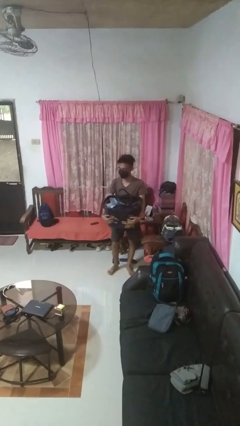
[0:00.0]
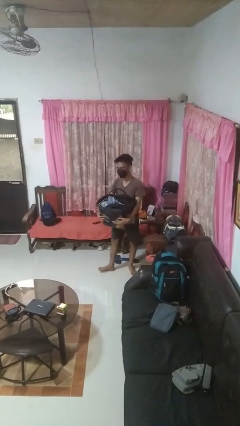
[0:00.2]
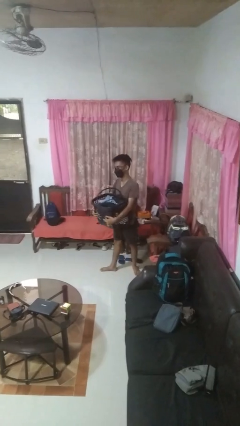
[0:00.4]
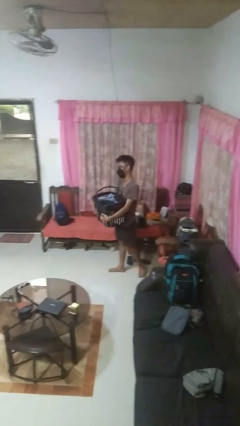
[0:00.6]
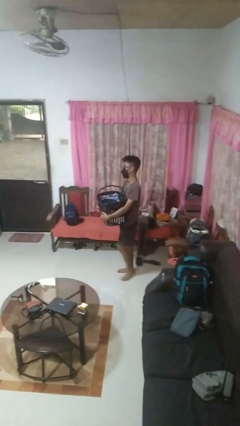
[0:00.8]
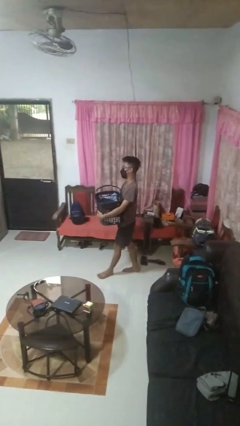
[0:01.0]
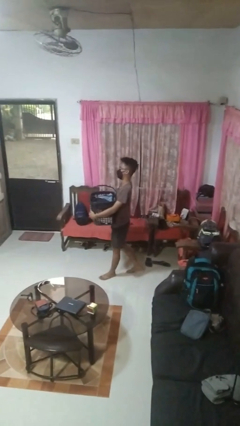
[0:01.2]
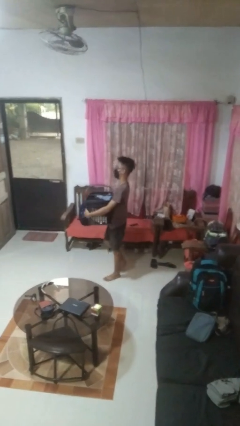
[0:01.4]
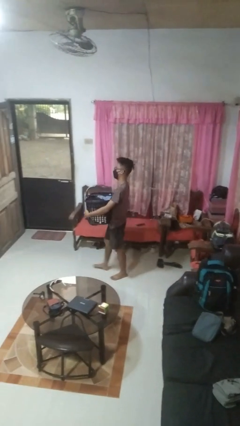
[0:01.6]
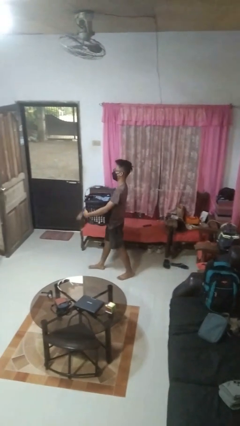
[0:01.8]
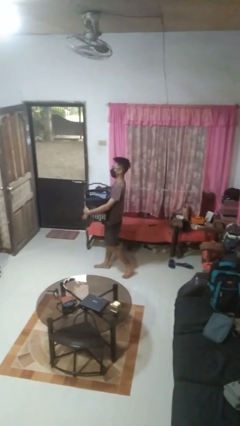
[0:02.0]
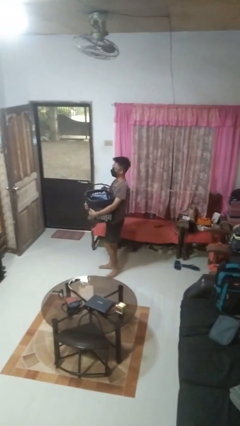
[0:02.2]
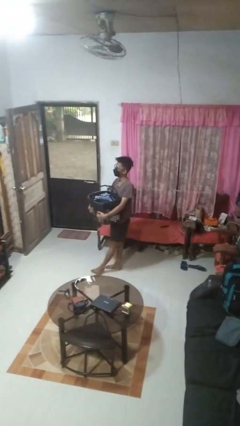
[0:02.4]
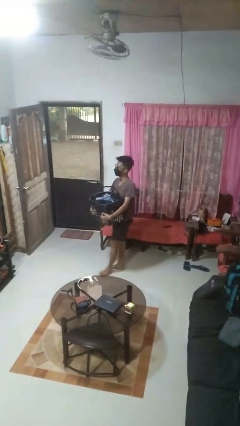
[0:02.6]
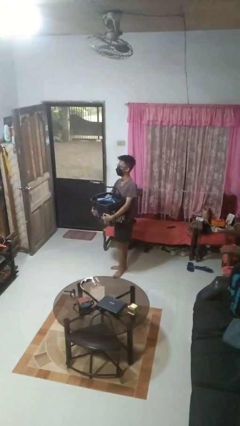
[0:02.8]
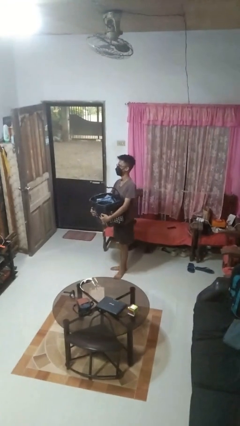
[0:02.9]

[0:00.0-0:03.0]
person carries laundry basket

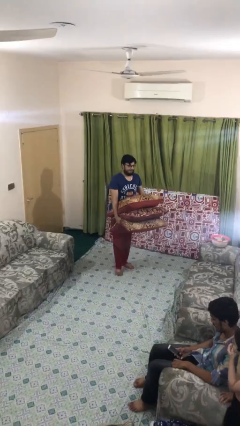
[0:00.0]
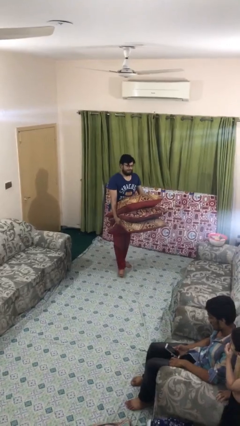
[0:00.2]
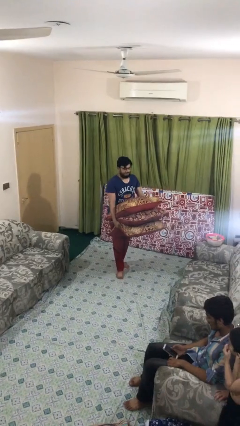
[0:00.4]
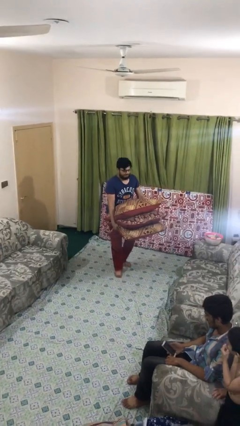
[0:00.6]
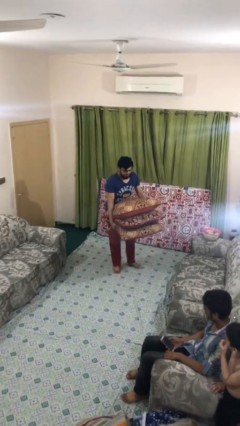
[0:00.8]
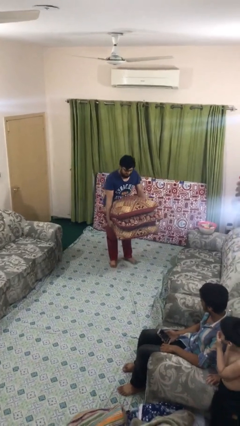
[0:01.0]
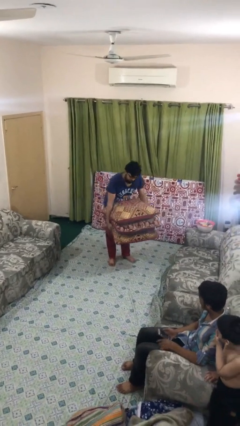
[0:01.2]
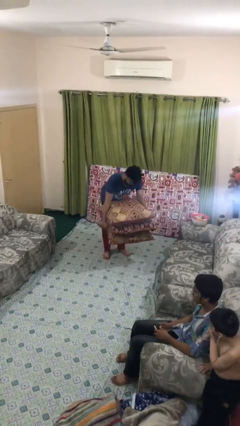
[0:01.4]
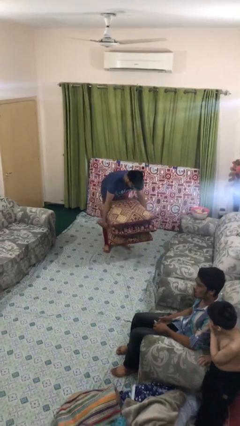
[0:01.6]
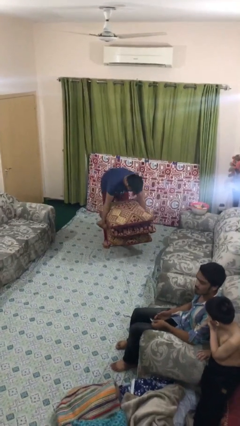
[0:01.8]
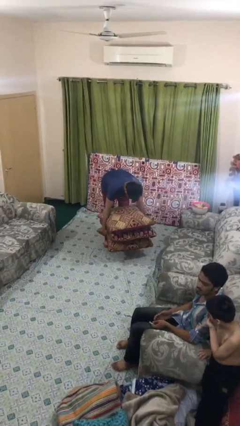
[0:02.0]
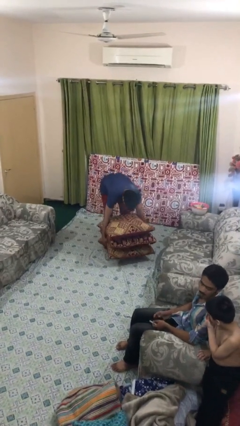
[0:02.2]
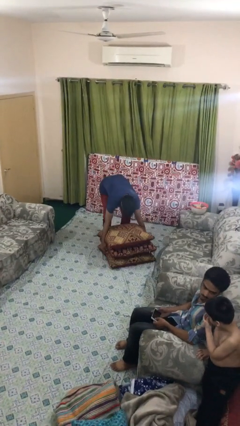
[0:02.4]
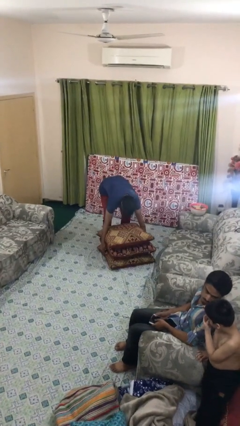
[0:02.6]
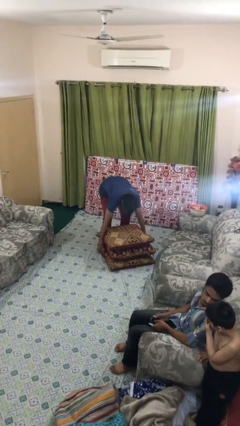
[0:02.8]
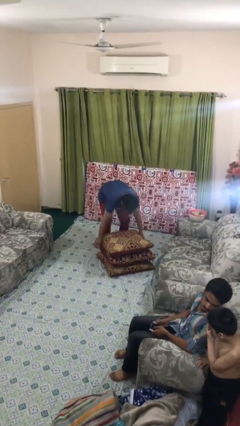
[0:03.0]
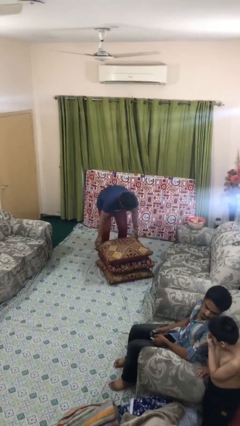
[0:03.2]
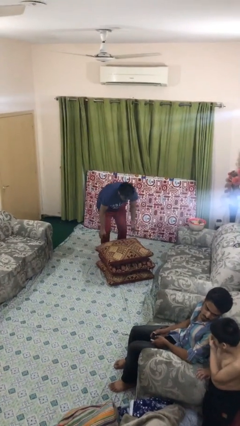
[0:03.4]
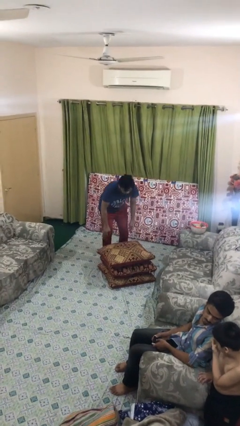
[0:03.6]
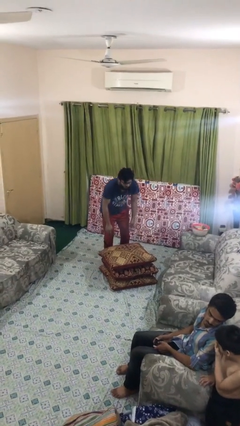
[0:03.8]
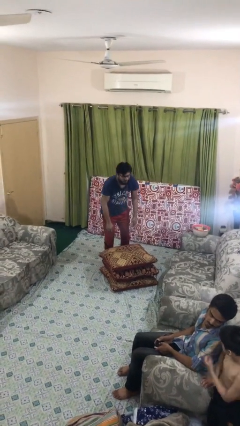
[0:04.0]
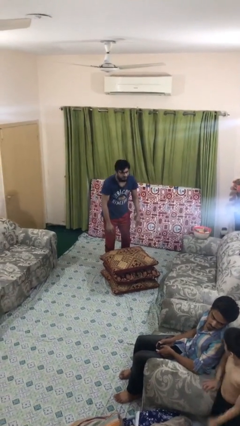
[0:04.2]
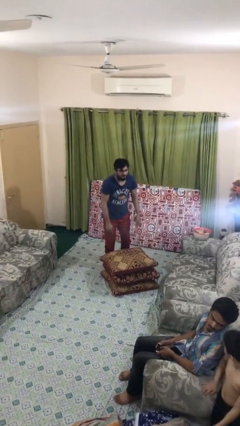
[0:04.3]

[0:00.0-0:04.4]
person puts down object on floor

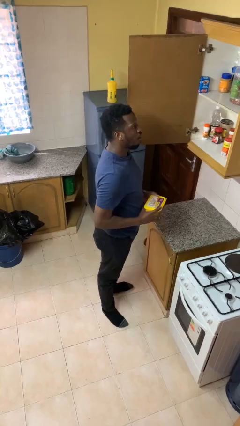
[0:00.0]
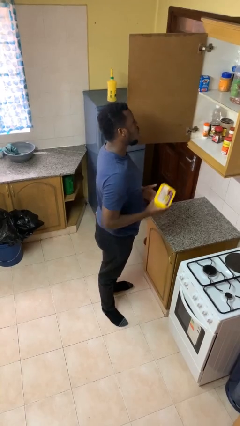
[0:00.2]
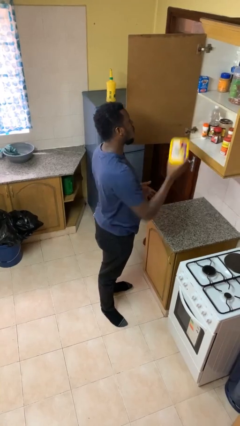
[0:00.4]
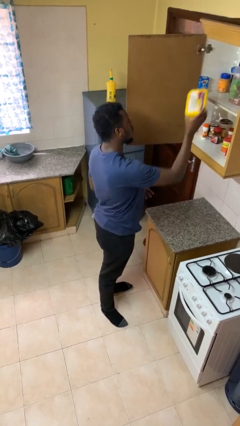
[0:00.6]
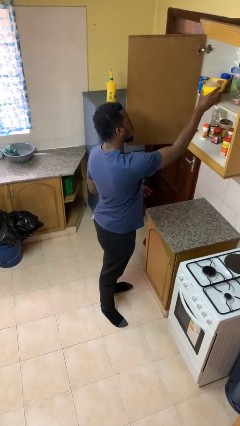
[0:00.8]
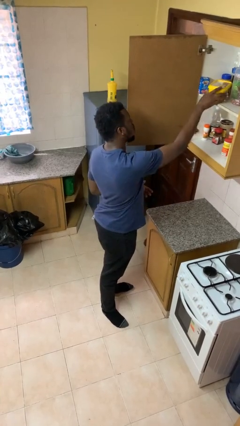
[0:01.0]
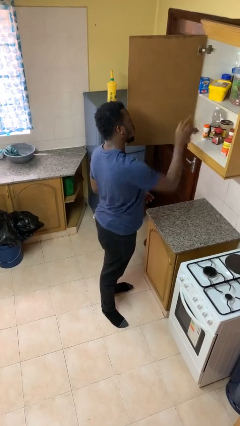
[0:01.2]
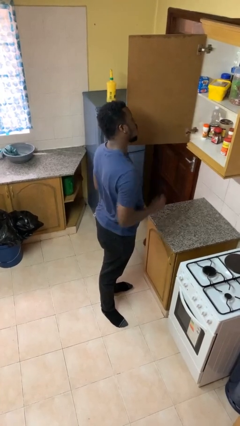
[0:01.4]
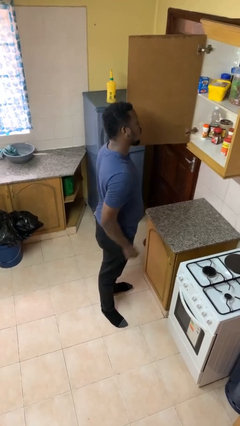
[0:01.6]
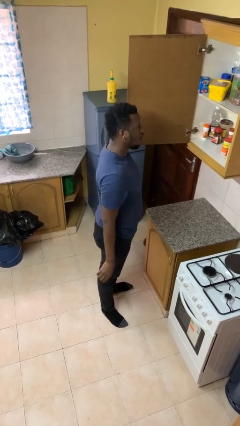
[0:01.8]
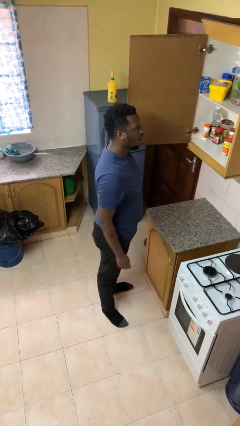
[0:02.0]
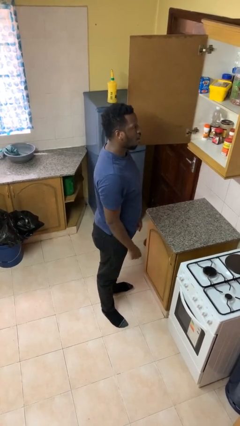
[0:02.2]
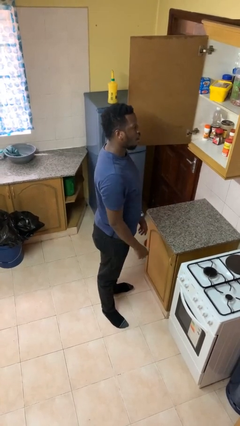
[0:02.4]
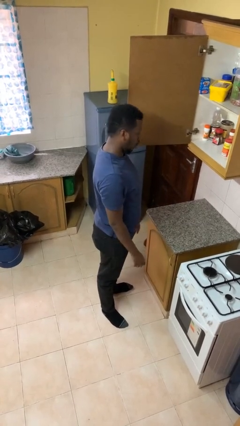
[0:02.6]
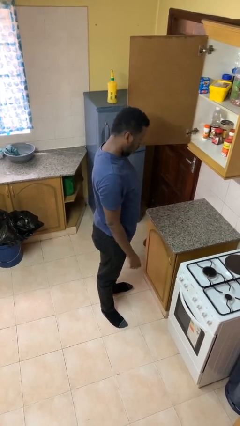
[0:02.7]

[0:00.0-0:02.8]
person puts down object on shelf

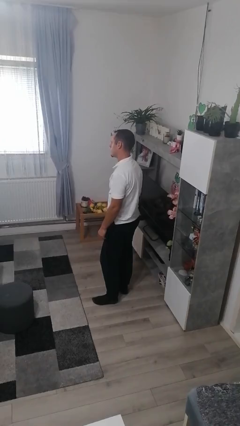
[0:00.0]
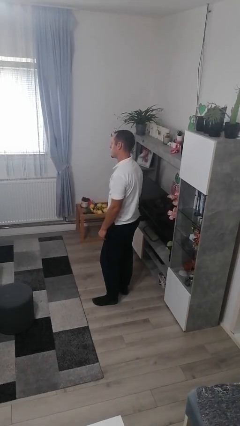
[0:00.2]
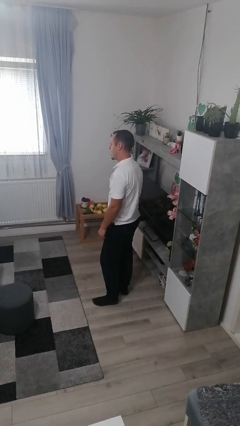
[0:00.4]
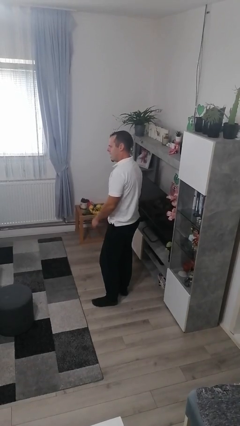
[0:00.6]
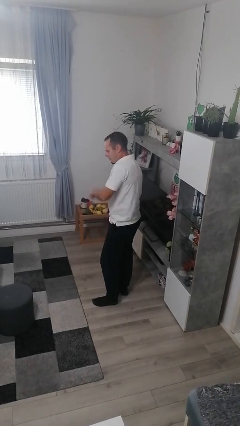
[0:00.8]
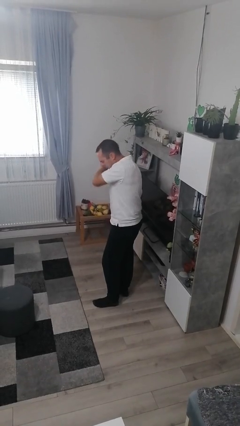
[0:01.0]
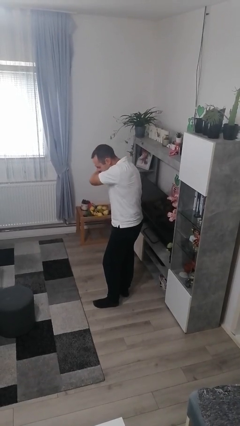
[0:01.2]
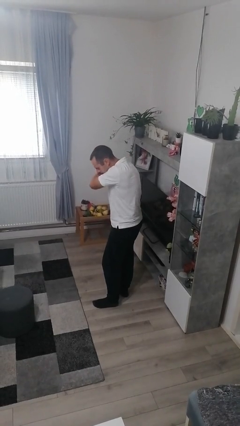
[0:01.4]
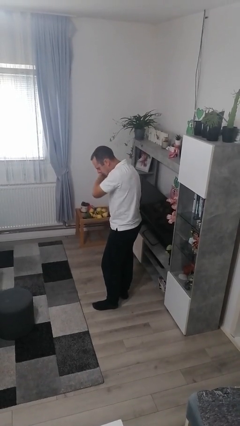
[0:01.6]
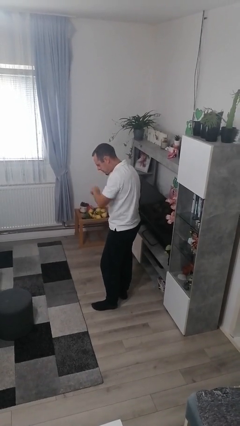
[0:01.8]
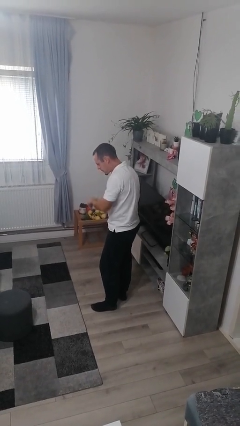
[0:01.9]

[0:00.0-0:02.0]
person sneezes into arm

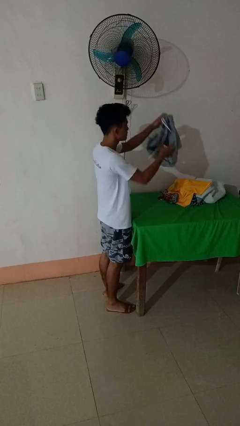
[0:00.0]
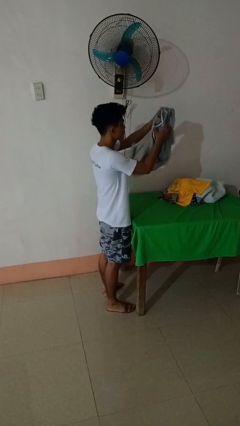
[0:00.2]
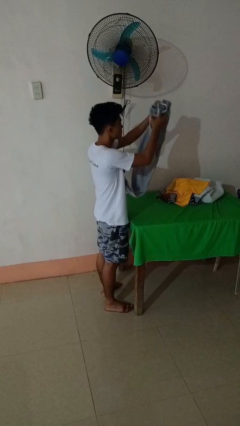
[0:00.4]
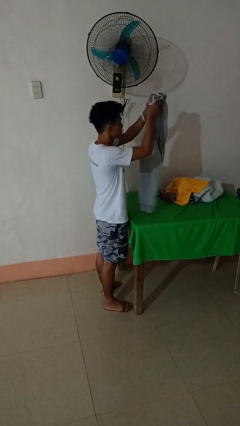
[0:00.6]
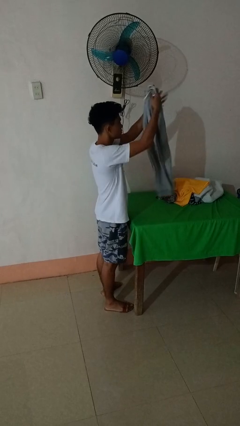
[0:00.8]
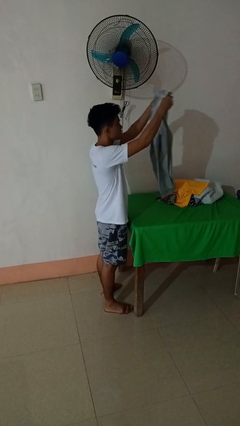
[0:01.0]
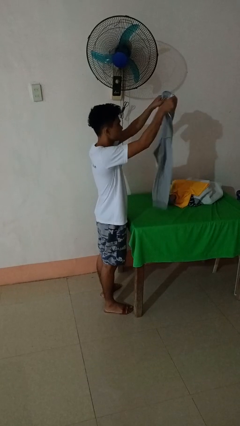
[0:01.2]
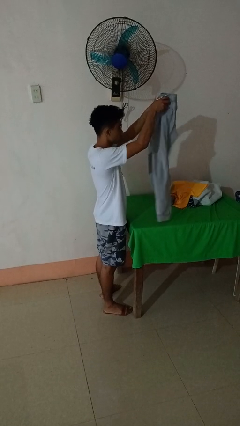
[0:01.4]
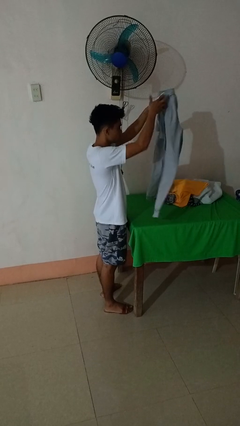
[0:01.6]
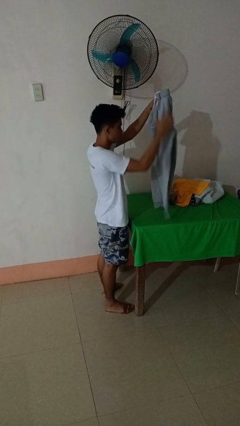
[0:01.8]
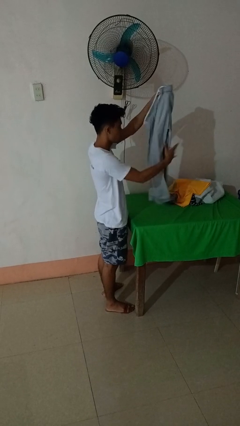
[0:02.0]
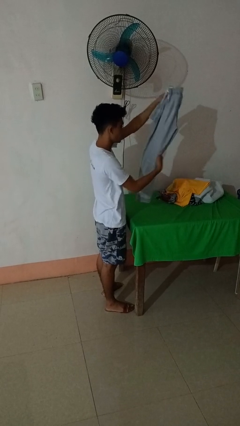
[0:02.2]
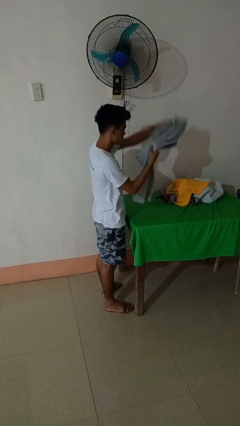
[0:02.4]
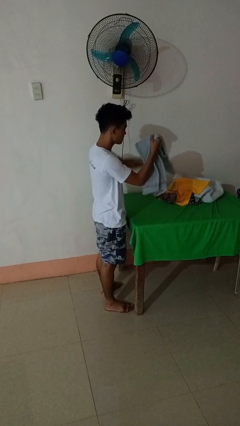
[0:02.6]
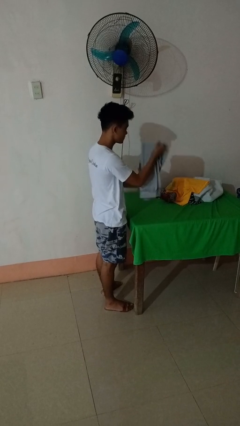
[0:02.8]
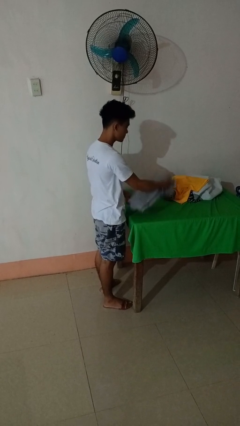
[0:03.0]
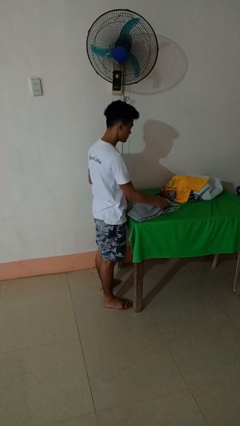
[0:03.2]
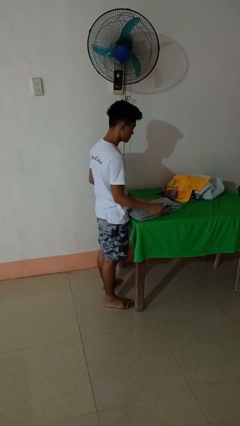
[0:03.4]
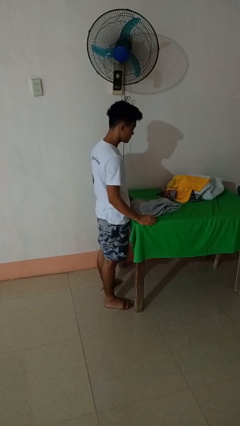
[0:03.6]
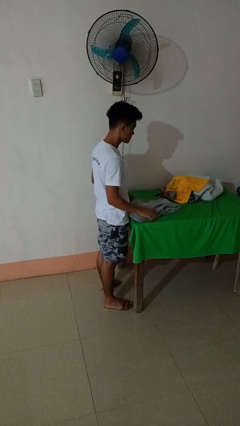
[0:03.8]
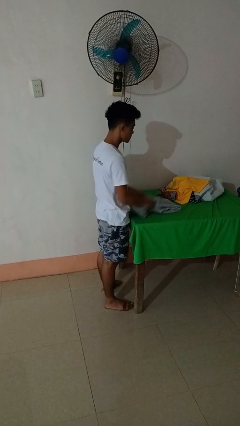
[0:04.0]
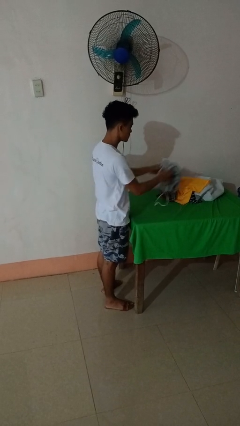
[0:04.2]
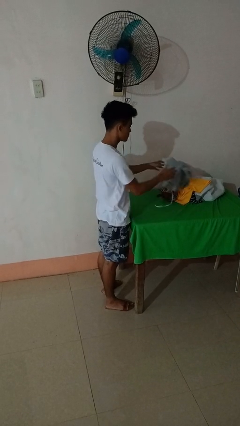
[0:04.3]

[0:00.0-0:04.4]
person folds pants

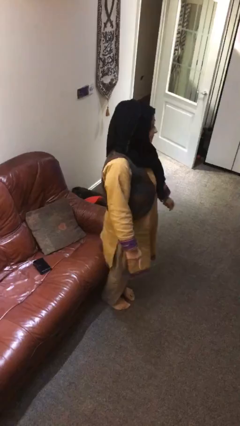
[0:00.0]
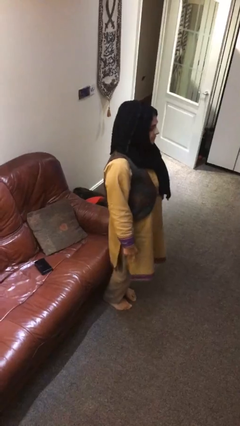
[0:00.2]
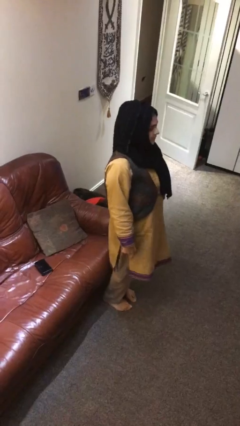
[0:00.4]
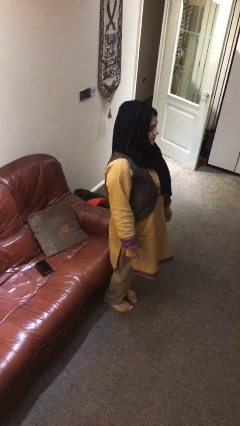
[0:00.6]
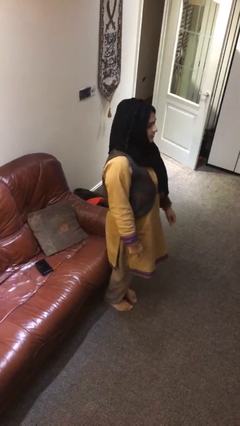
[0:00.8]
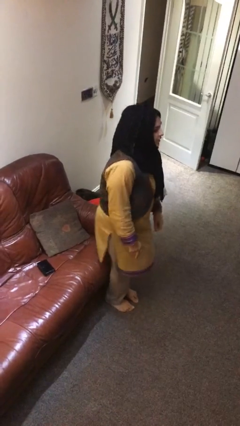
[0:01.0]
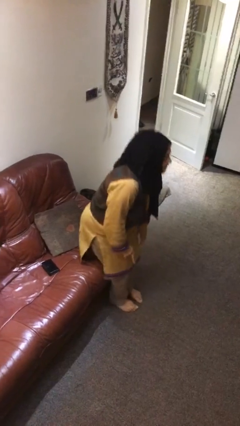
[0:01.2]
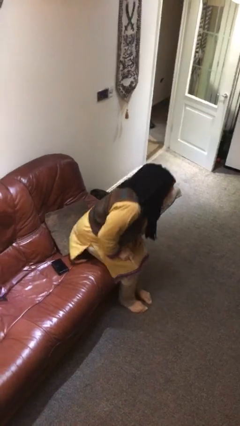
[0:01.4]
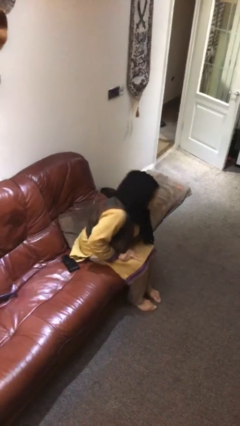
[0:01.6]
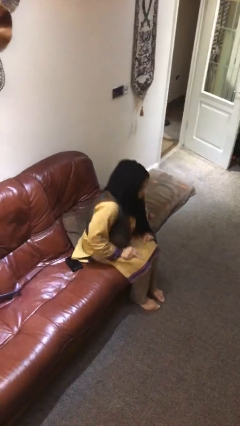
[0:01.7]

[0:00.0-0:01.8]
person sits down
